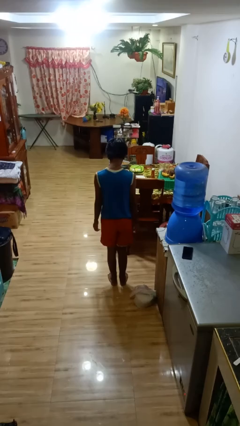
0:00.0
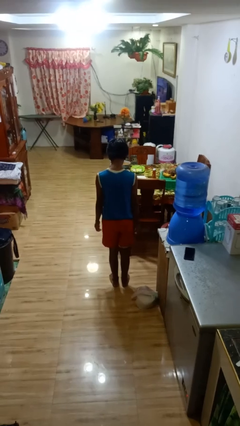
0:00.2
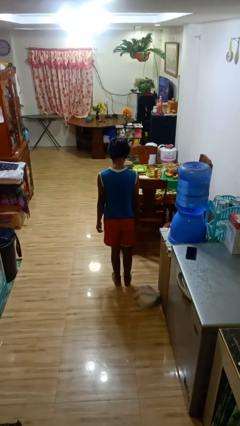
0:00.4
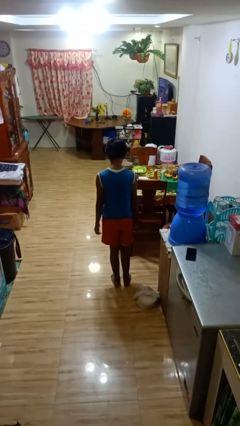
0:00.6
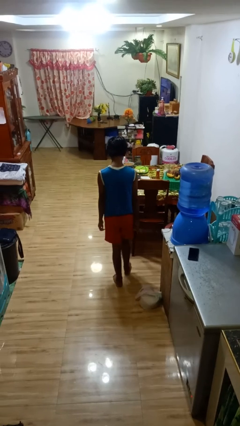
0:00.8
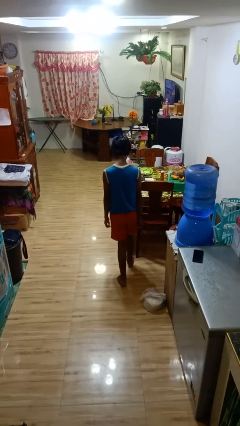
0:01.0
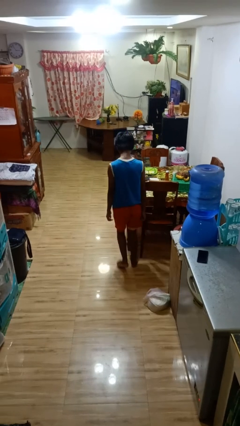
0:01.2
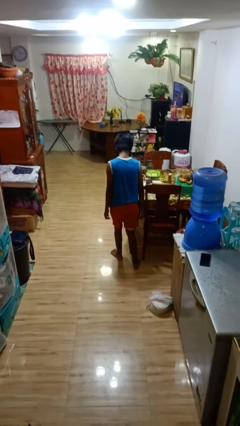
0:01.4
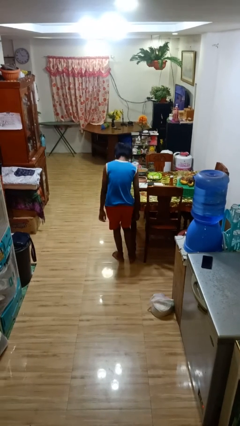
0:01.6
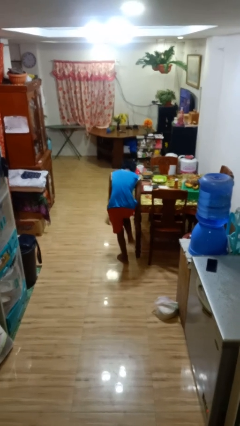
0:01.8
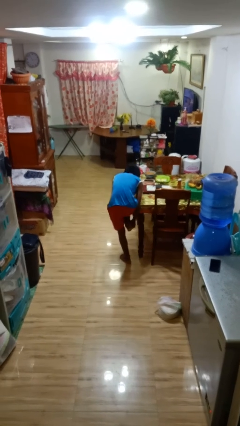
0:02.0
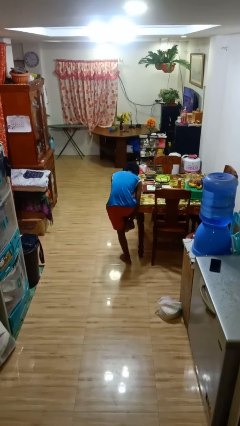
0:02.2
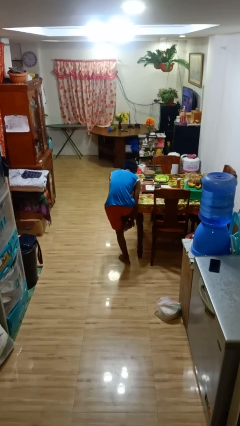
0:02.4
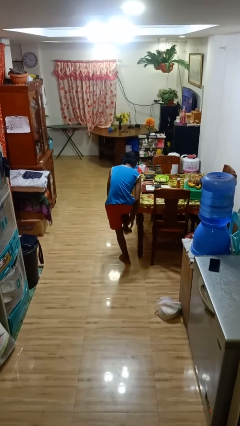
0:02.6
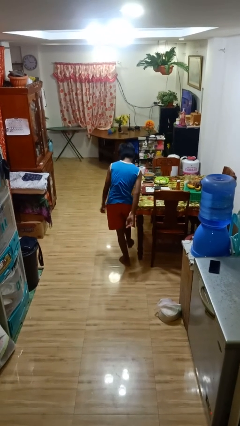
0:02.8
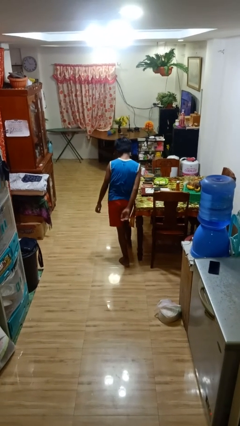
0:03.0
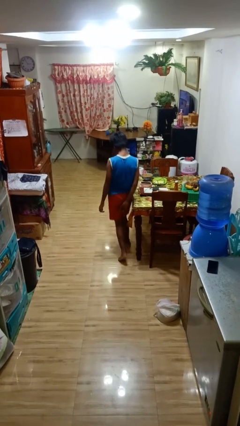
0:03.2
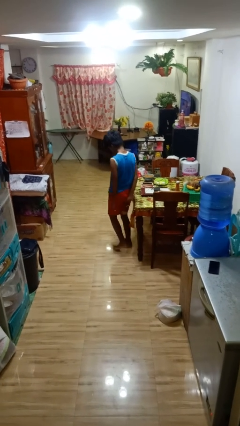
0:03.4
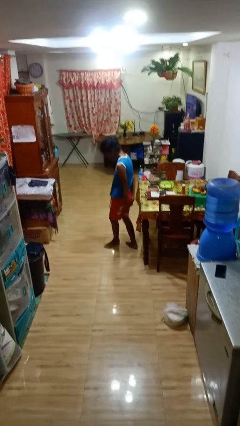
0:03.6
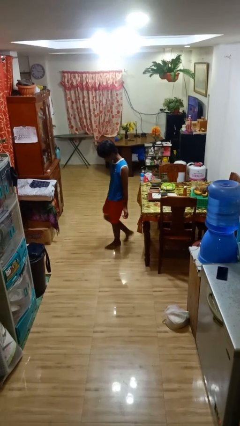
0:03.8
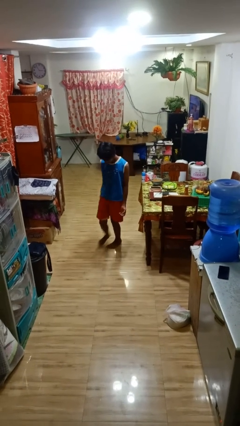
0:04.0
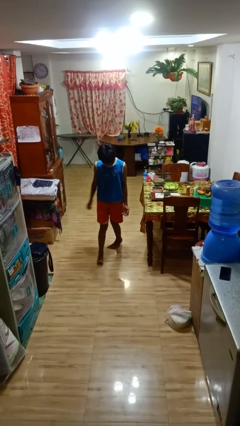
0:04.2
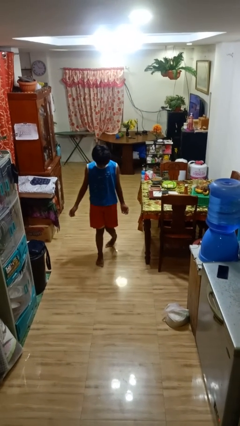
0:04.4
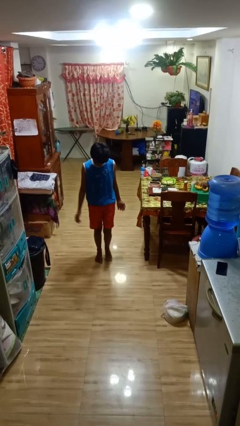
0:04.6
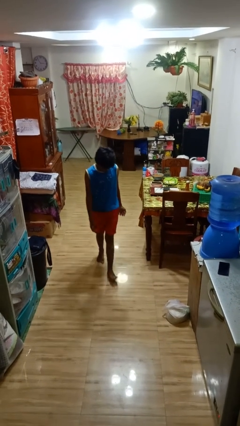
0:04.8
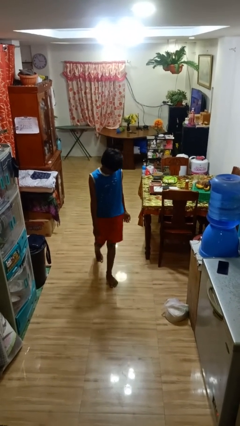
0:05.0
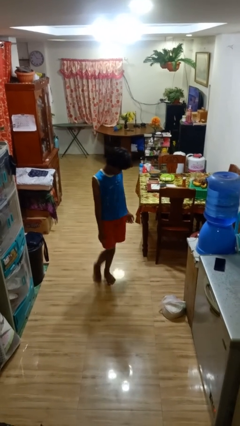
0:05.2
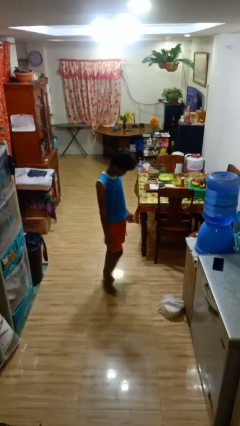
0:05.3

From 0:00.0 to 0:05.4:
person bumps into table

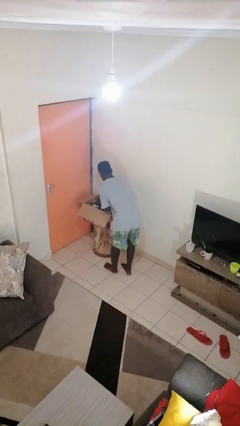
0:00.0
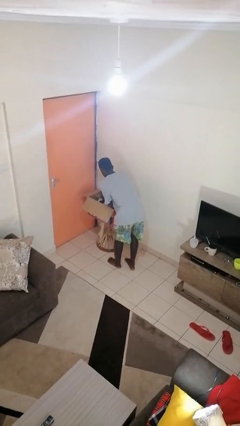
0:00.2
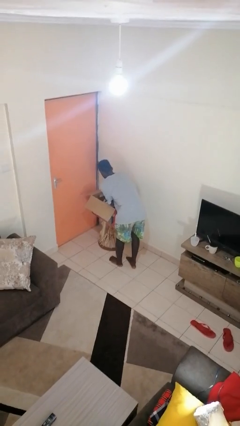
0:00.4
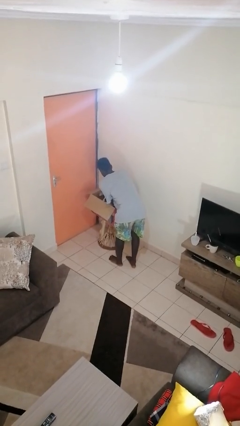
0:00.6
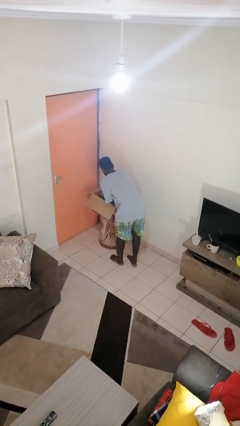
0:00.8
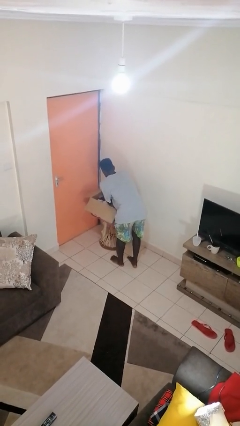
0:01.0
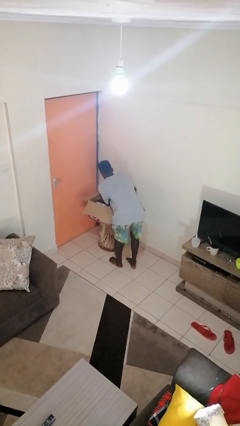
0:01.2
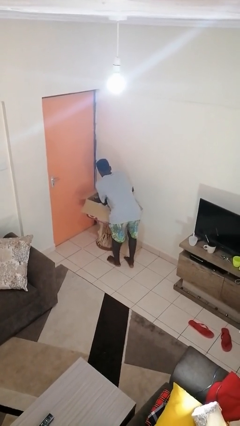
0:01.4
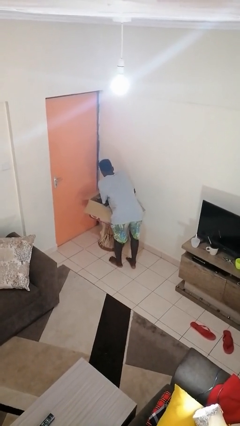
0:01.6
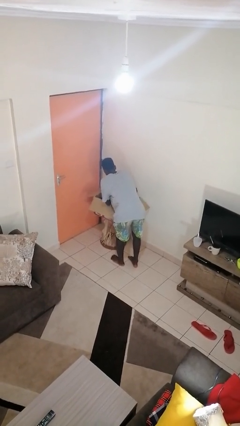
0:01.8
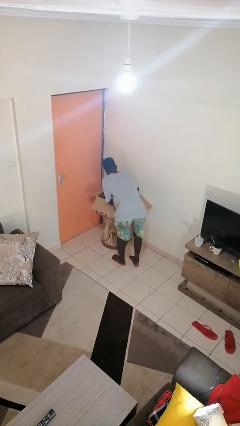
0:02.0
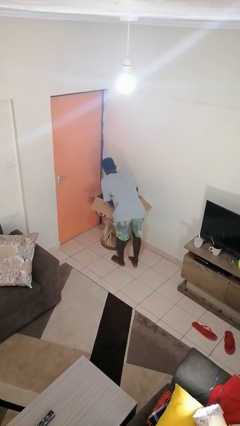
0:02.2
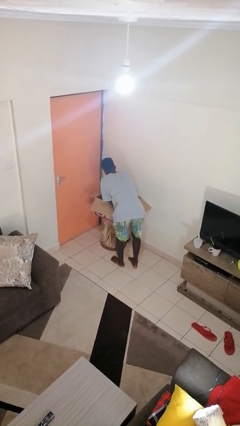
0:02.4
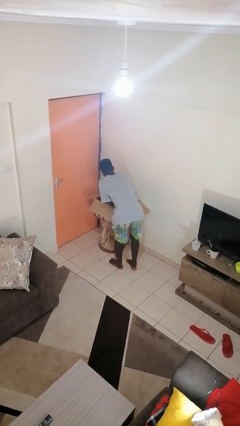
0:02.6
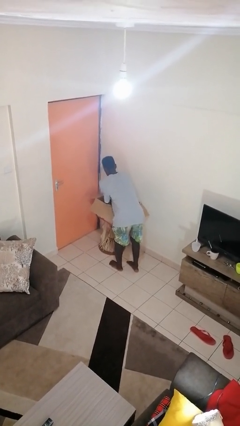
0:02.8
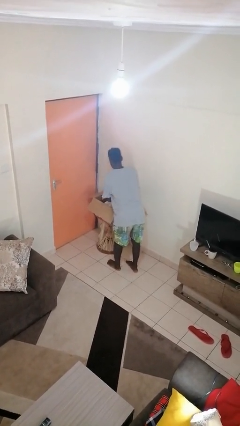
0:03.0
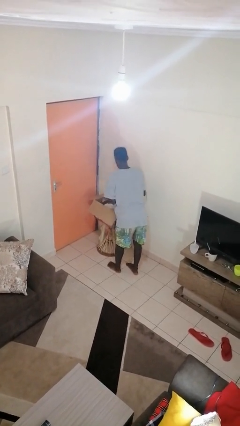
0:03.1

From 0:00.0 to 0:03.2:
person searches in box

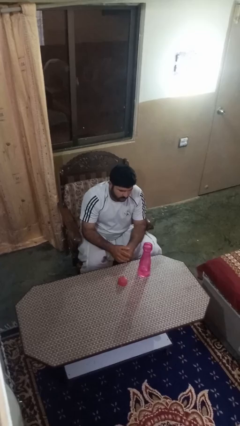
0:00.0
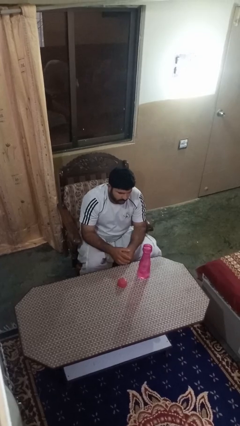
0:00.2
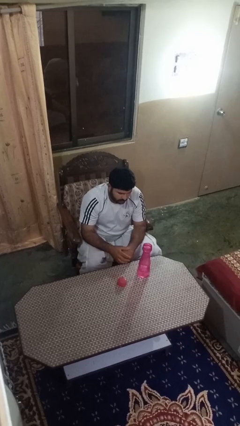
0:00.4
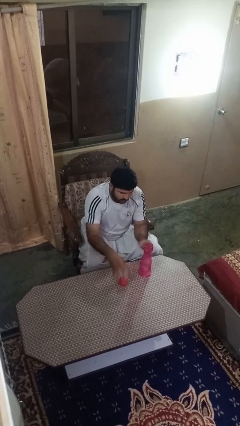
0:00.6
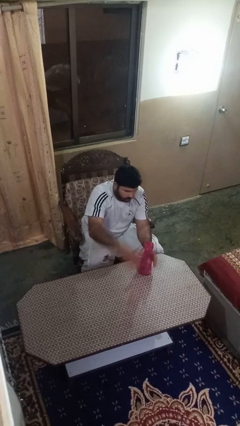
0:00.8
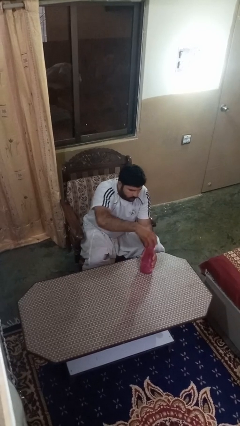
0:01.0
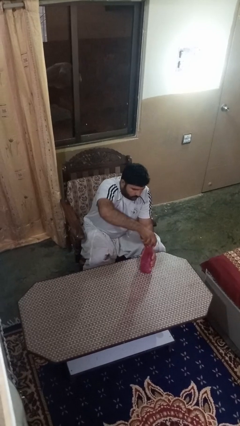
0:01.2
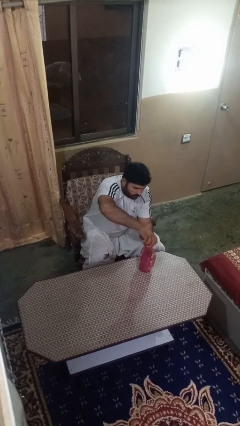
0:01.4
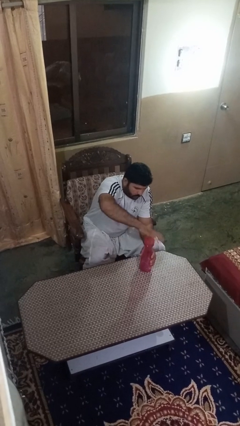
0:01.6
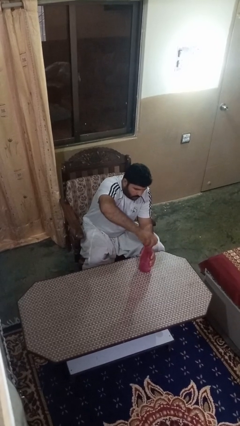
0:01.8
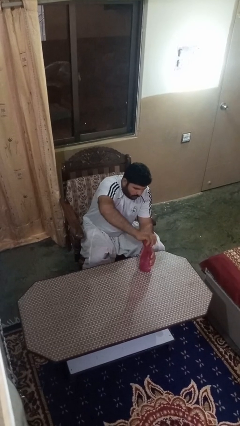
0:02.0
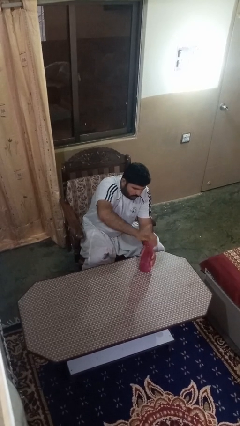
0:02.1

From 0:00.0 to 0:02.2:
person screws lid to bottle

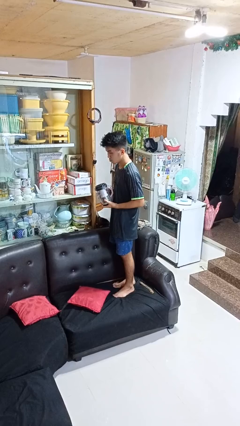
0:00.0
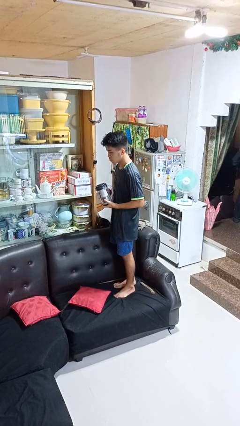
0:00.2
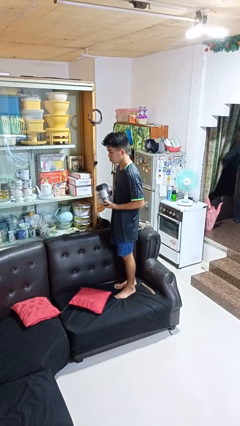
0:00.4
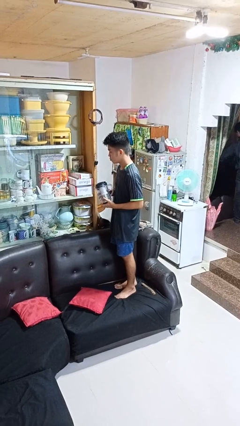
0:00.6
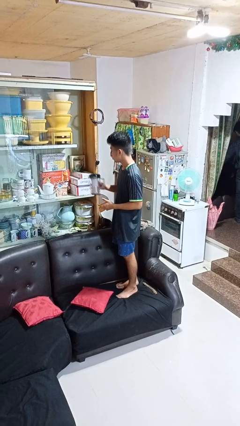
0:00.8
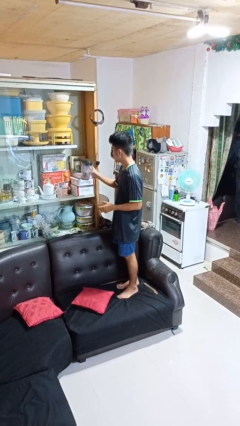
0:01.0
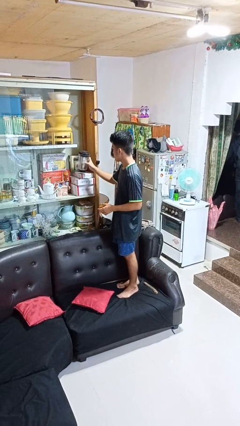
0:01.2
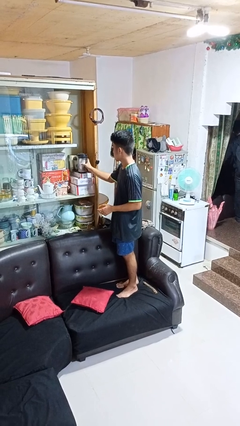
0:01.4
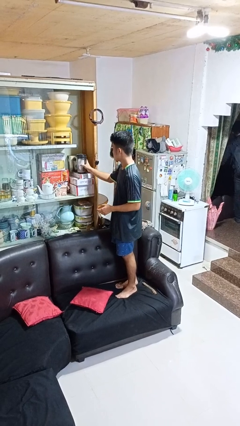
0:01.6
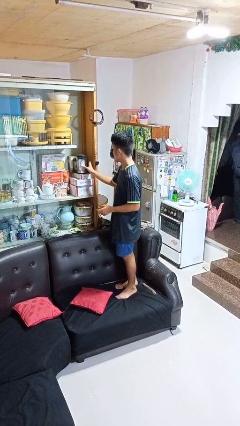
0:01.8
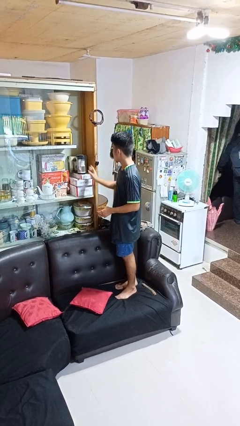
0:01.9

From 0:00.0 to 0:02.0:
person puts down object into cabinet

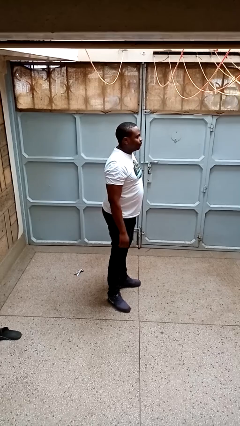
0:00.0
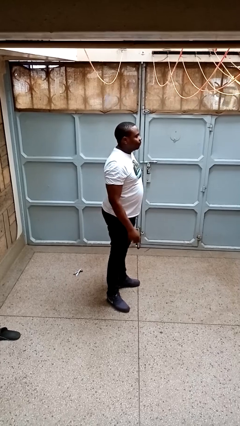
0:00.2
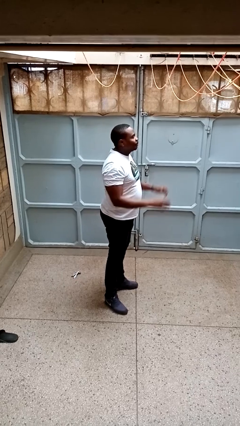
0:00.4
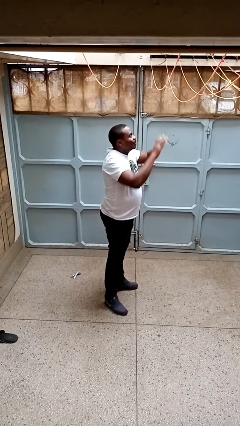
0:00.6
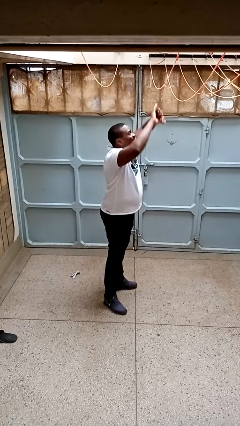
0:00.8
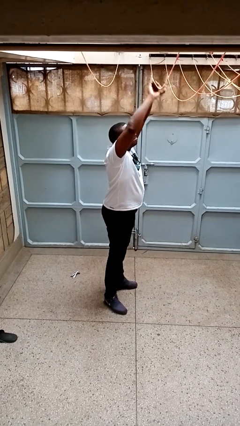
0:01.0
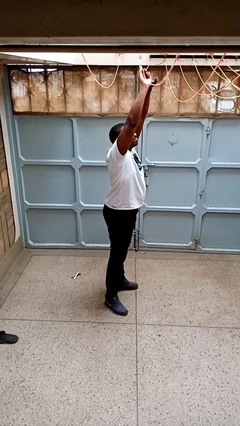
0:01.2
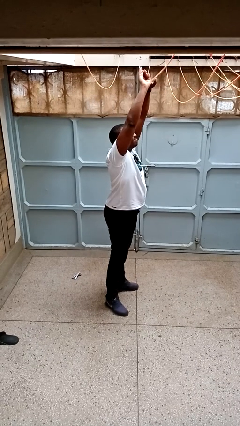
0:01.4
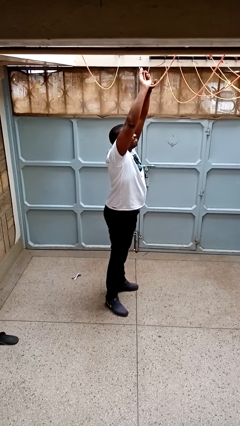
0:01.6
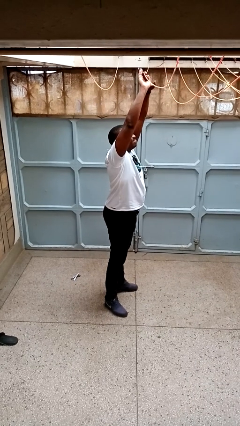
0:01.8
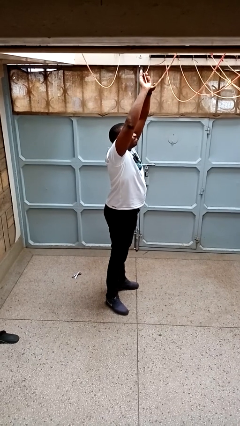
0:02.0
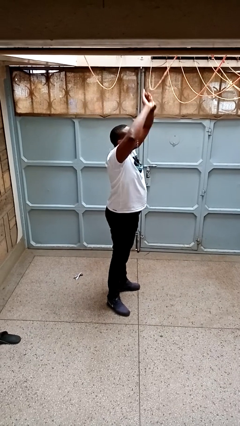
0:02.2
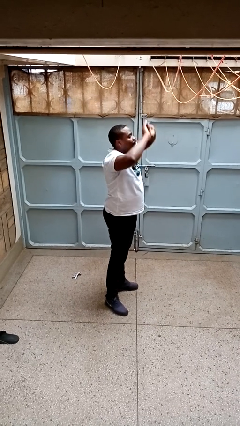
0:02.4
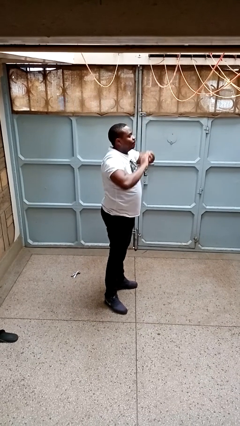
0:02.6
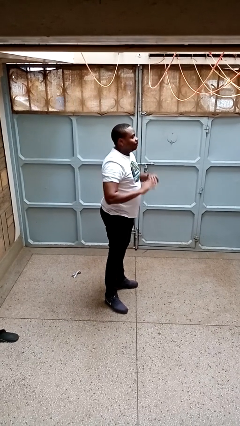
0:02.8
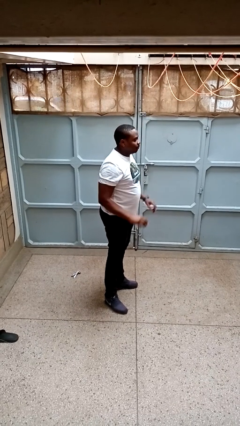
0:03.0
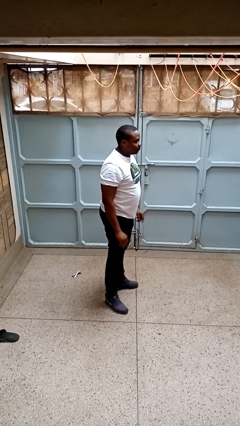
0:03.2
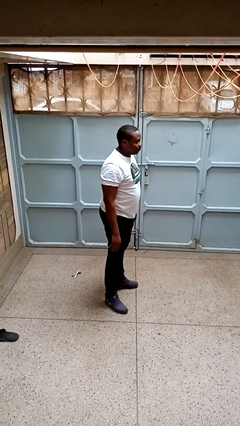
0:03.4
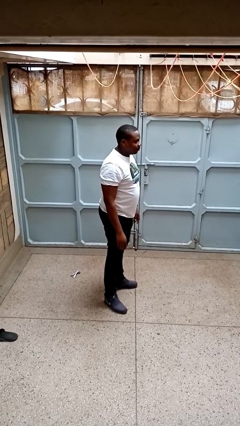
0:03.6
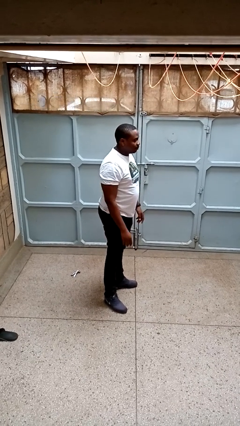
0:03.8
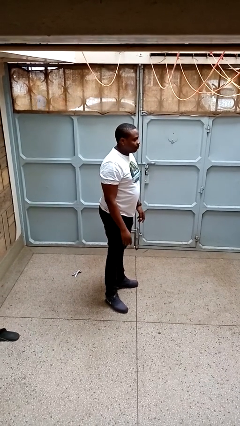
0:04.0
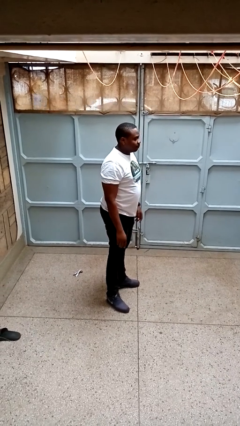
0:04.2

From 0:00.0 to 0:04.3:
person stretches arms over head

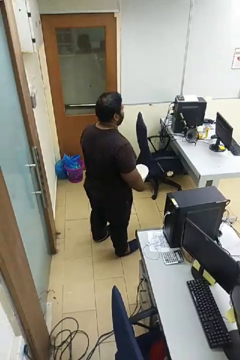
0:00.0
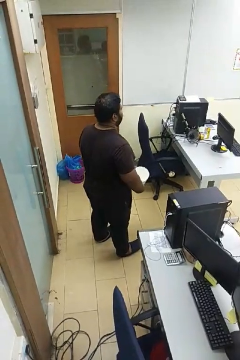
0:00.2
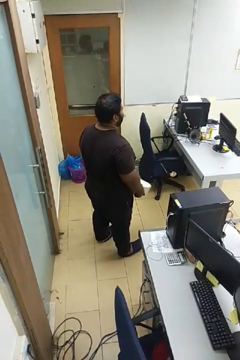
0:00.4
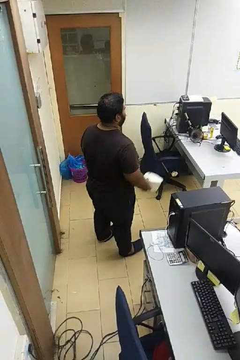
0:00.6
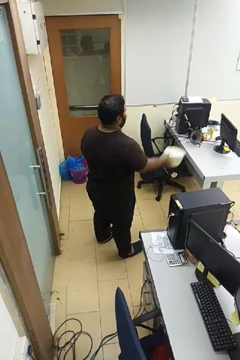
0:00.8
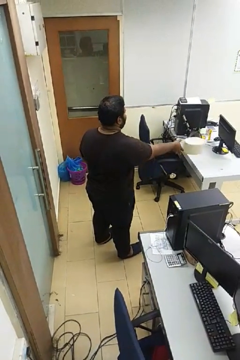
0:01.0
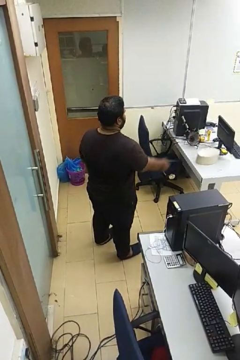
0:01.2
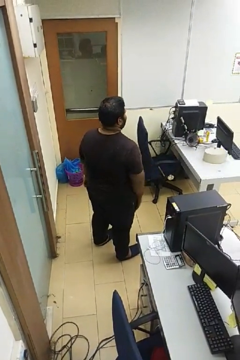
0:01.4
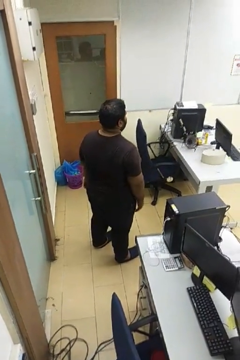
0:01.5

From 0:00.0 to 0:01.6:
person throws object on table
